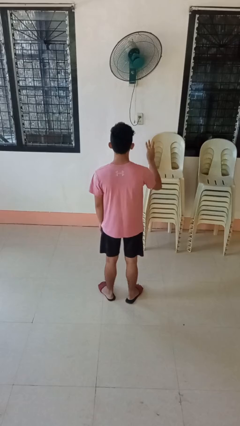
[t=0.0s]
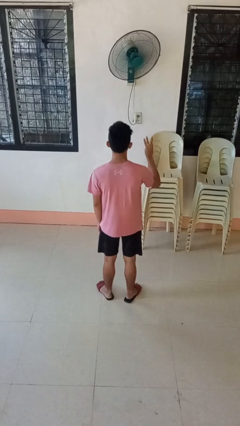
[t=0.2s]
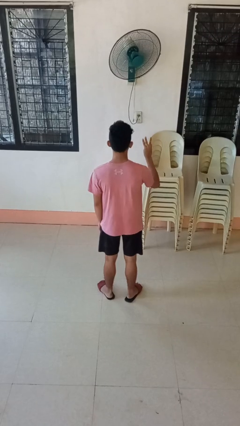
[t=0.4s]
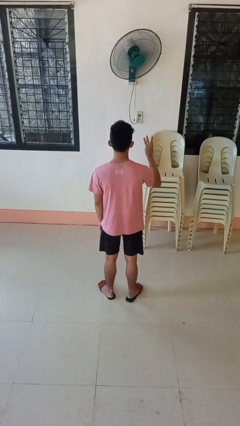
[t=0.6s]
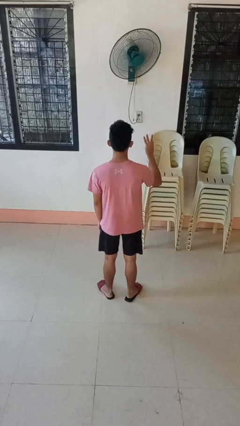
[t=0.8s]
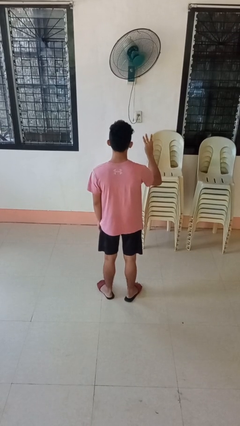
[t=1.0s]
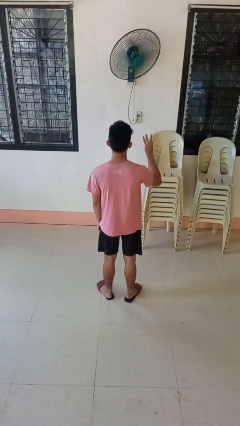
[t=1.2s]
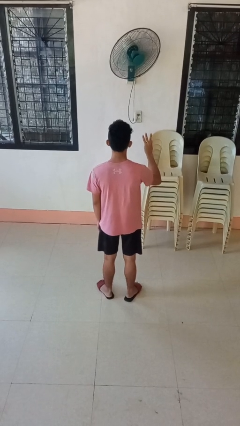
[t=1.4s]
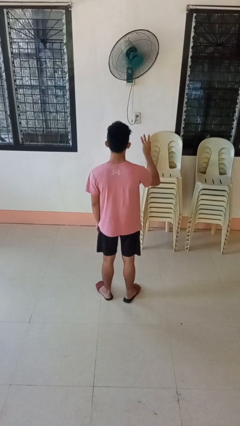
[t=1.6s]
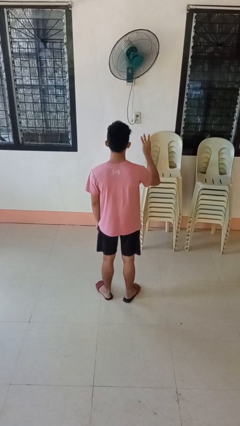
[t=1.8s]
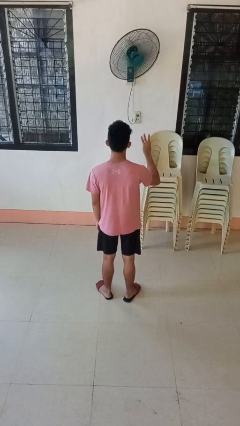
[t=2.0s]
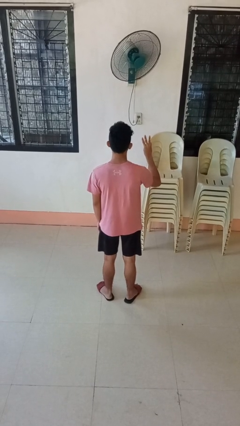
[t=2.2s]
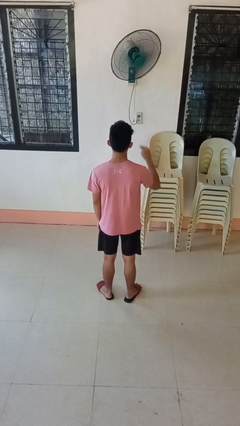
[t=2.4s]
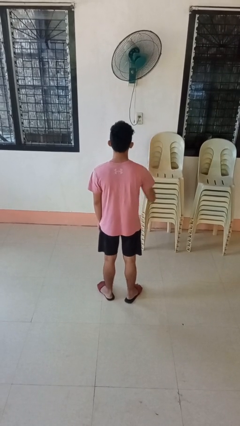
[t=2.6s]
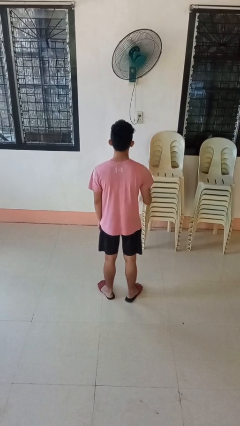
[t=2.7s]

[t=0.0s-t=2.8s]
person gestures number three

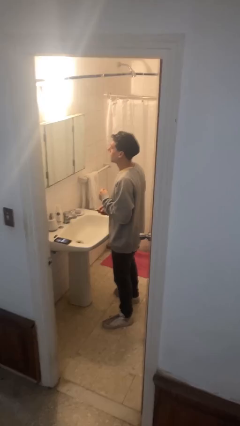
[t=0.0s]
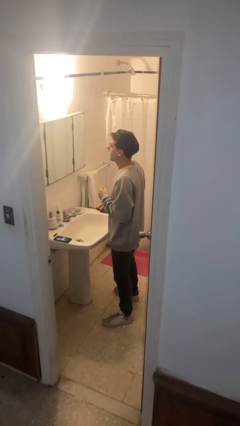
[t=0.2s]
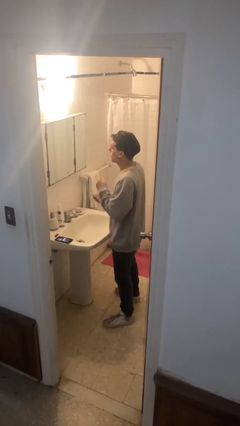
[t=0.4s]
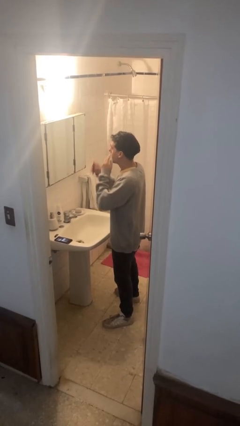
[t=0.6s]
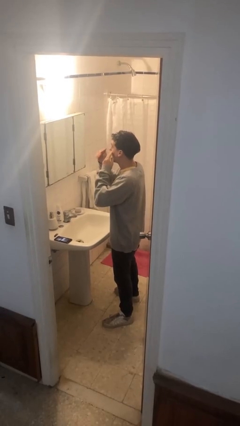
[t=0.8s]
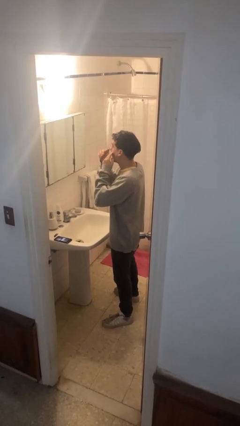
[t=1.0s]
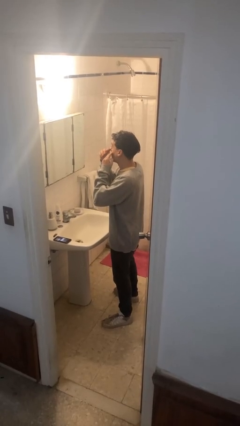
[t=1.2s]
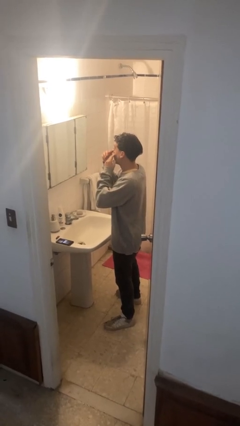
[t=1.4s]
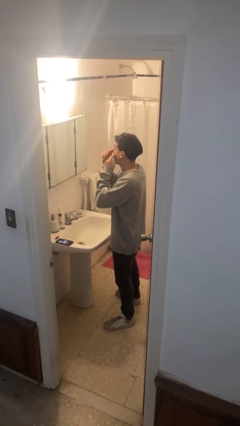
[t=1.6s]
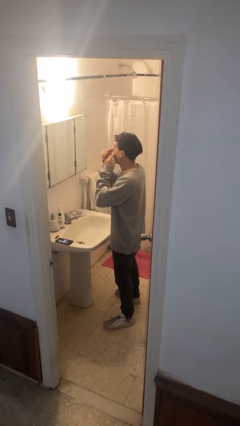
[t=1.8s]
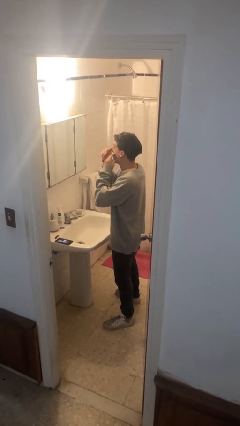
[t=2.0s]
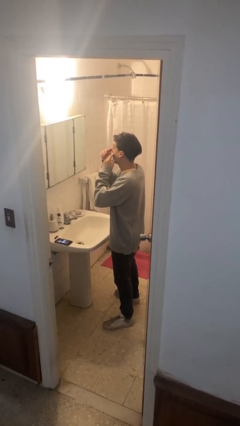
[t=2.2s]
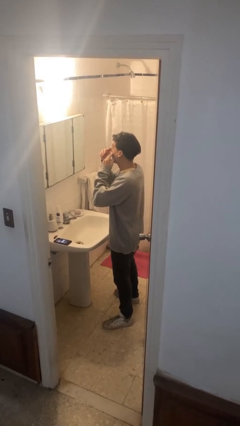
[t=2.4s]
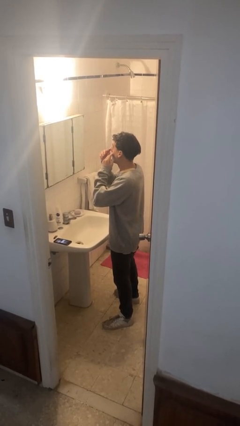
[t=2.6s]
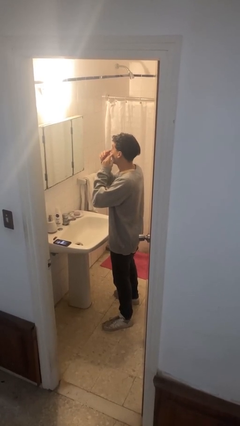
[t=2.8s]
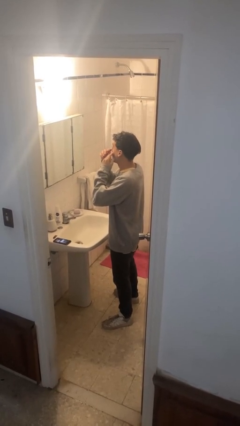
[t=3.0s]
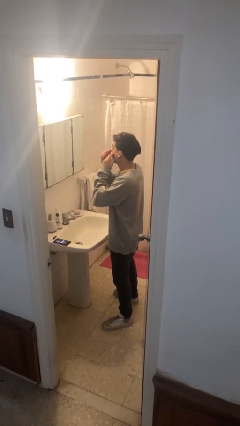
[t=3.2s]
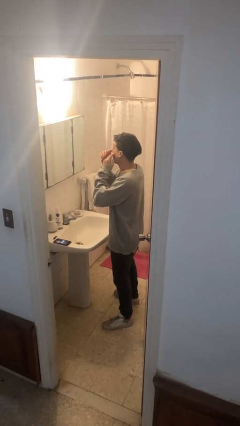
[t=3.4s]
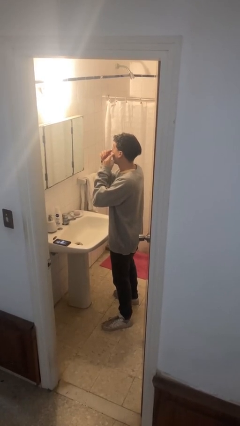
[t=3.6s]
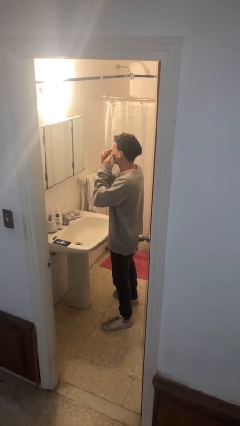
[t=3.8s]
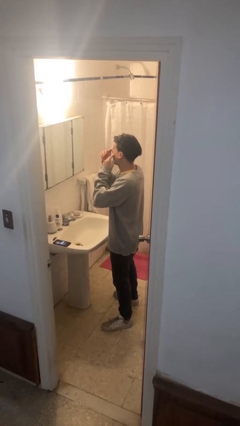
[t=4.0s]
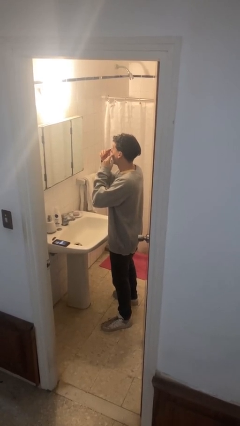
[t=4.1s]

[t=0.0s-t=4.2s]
person applies eye makeup

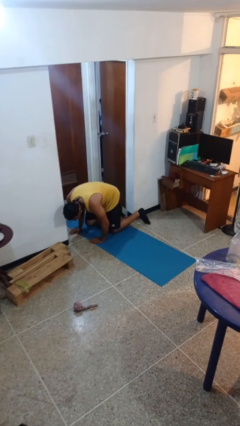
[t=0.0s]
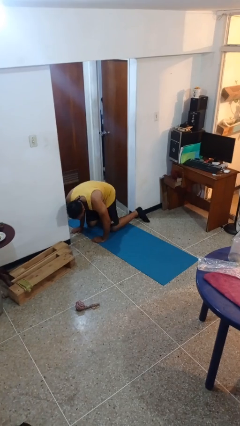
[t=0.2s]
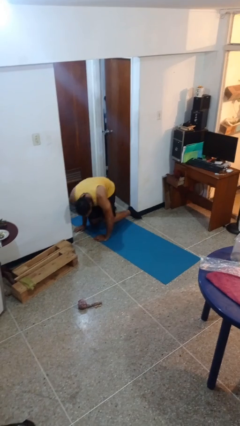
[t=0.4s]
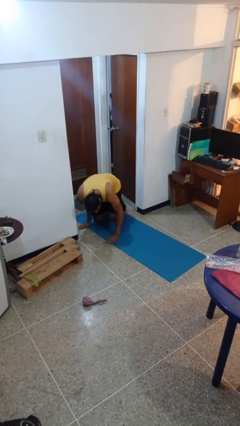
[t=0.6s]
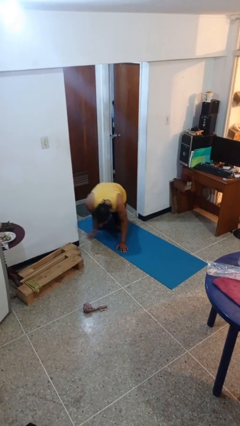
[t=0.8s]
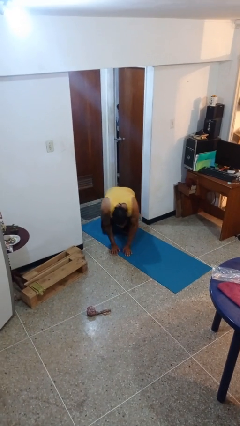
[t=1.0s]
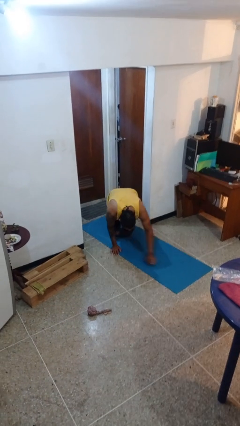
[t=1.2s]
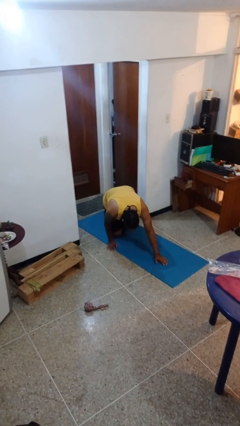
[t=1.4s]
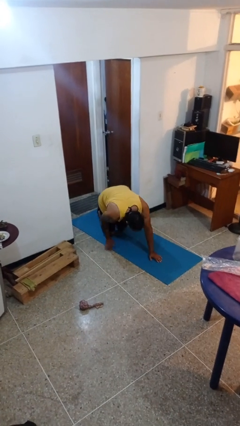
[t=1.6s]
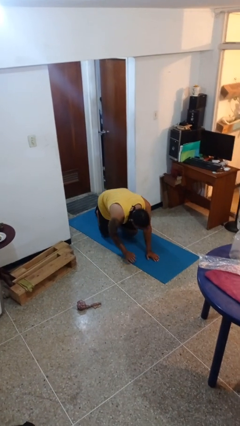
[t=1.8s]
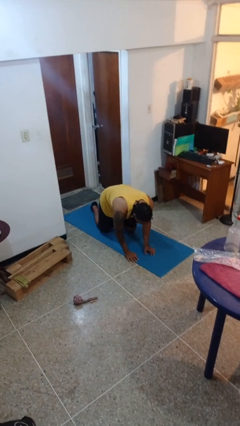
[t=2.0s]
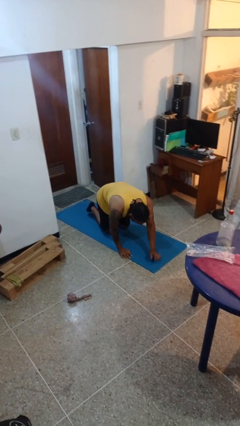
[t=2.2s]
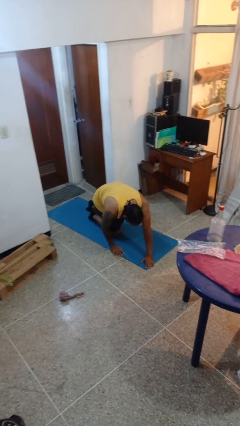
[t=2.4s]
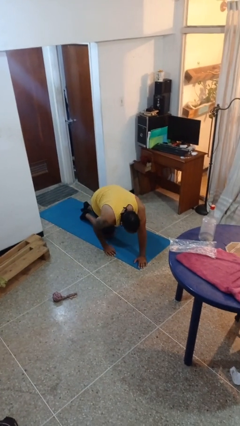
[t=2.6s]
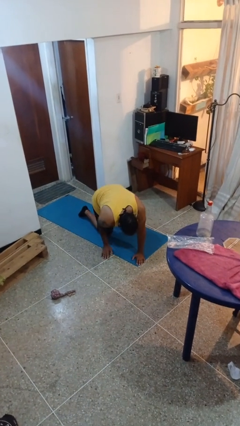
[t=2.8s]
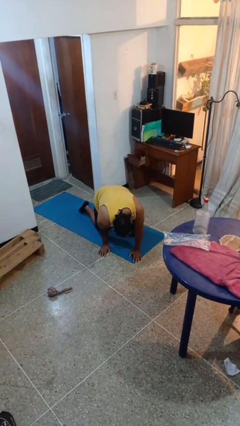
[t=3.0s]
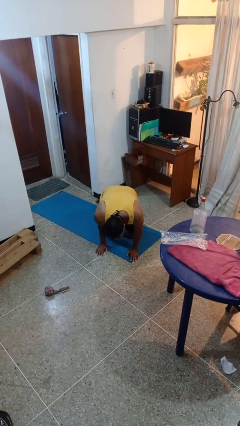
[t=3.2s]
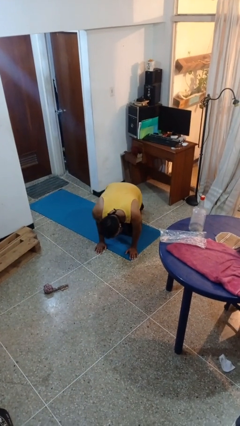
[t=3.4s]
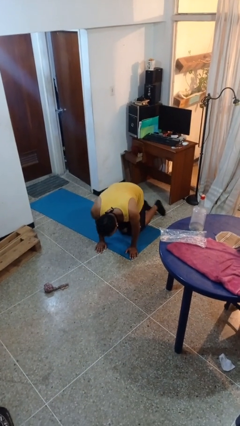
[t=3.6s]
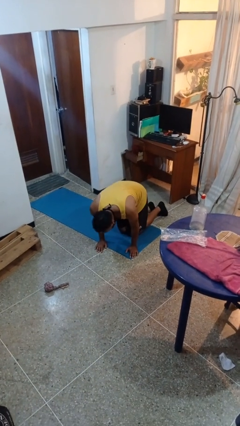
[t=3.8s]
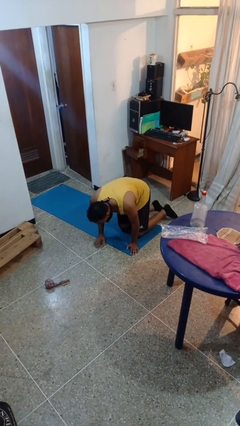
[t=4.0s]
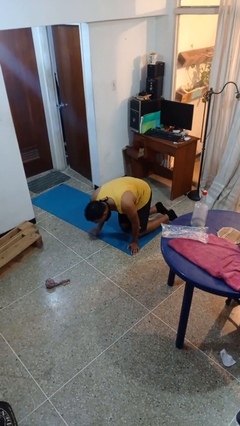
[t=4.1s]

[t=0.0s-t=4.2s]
person crawls

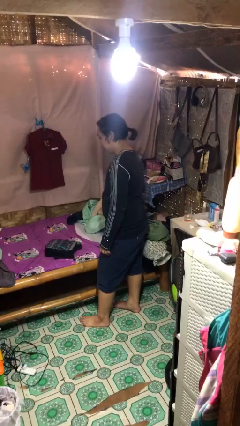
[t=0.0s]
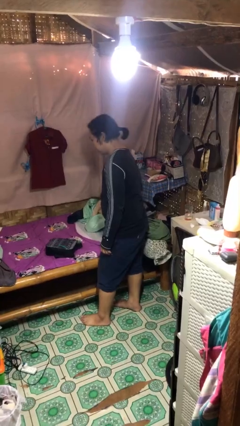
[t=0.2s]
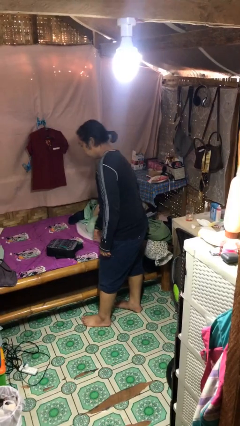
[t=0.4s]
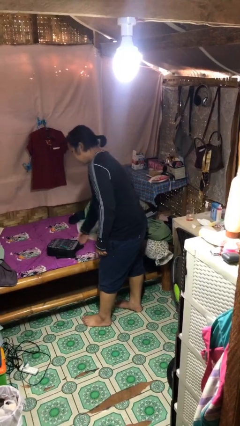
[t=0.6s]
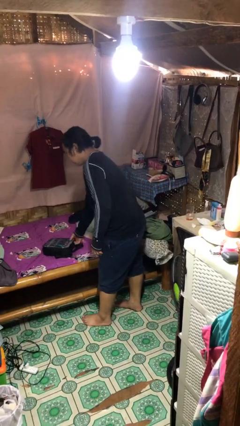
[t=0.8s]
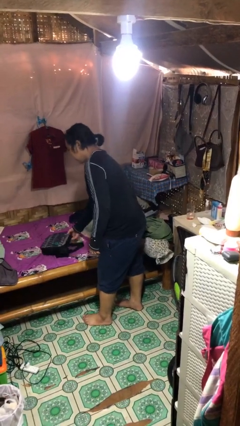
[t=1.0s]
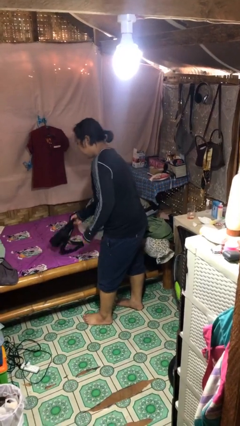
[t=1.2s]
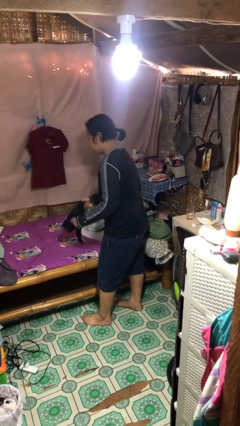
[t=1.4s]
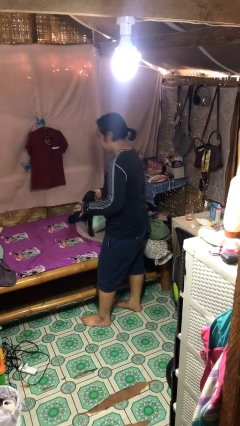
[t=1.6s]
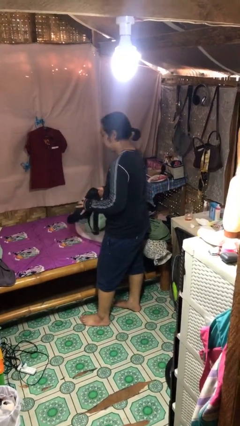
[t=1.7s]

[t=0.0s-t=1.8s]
person picks up object from bed

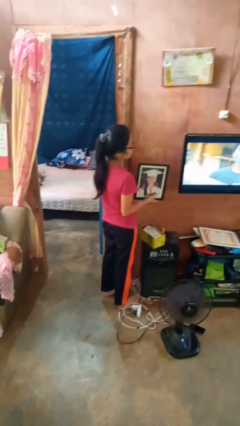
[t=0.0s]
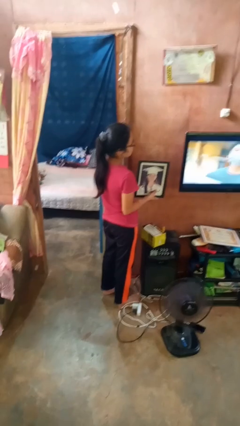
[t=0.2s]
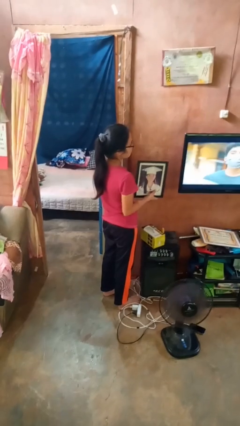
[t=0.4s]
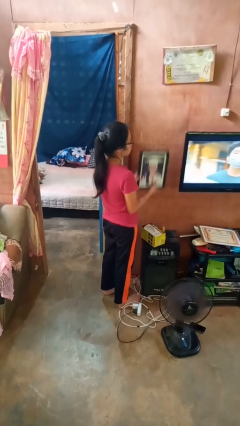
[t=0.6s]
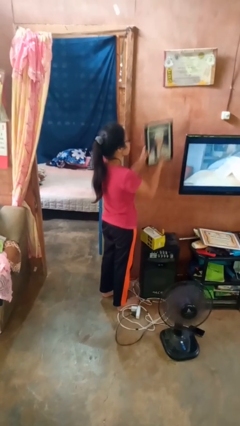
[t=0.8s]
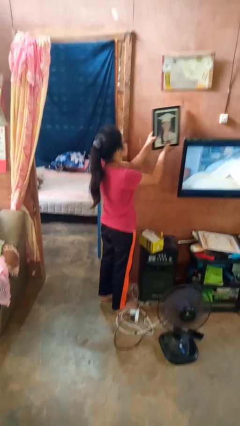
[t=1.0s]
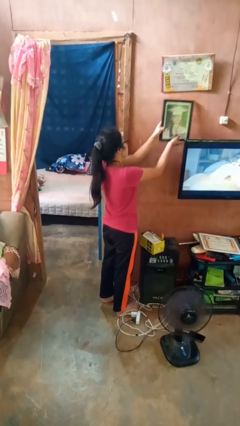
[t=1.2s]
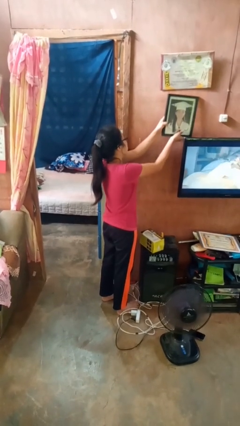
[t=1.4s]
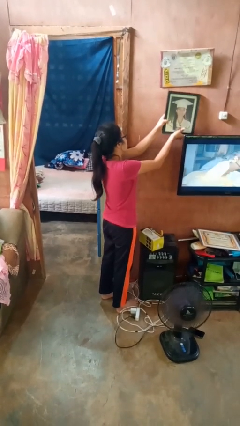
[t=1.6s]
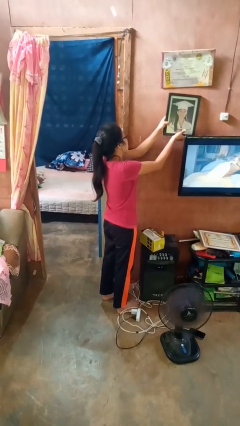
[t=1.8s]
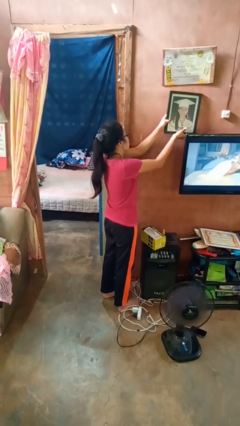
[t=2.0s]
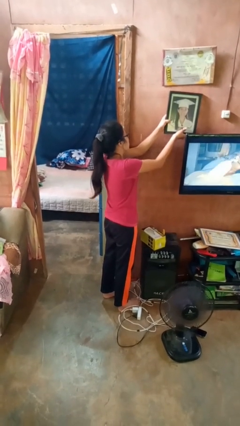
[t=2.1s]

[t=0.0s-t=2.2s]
person puts up picture frame

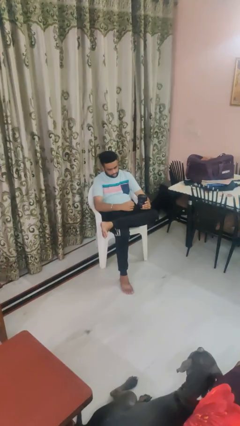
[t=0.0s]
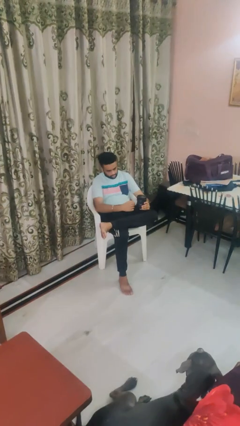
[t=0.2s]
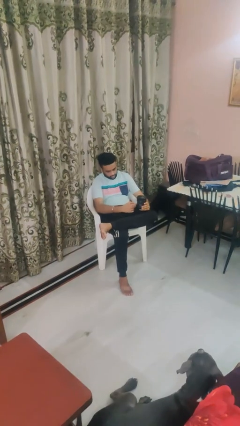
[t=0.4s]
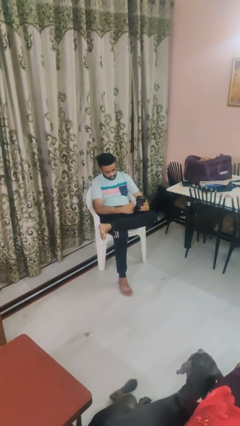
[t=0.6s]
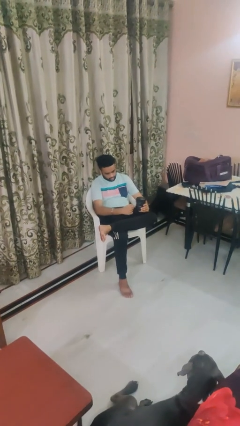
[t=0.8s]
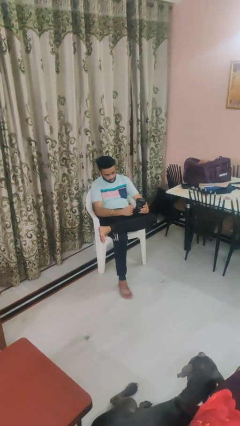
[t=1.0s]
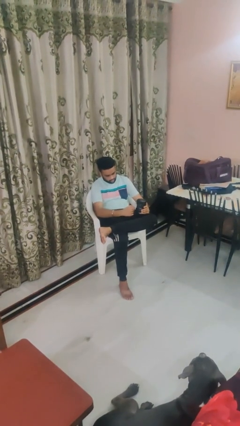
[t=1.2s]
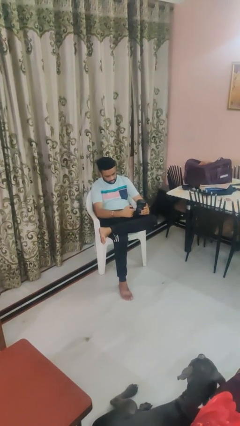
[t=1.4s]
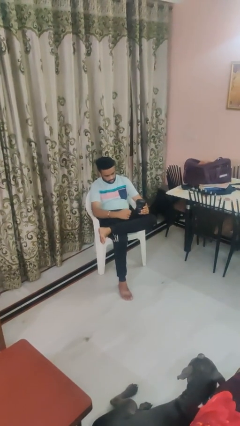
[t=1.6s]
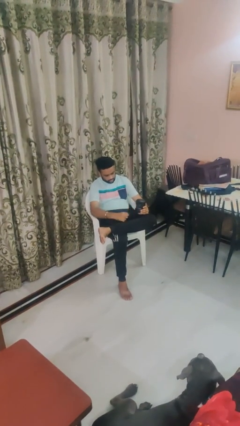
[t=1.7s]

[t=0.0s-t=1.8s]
person taps object with finger
